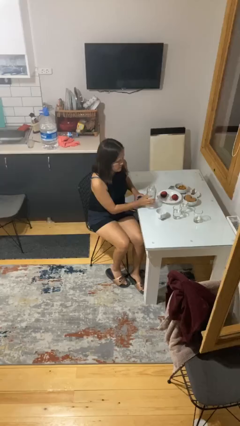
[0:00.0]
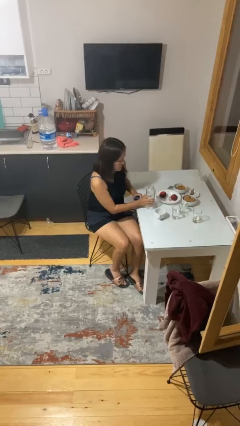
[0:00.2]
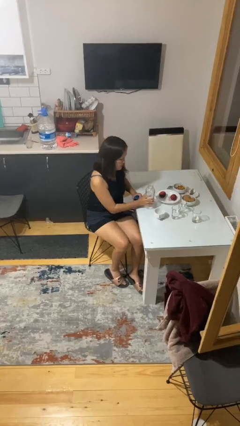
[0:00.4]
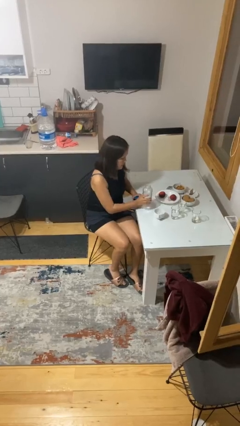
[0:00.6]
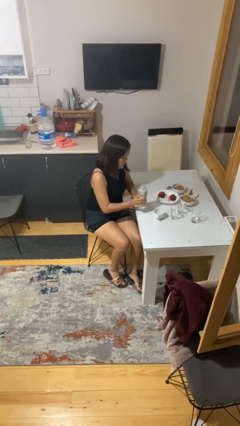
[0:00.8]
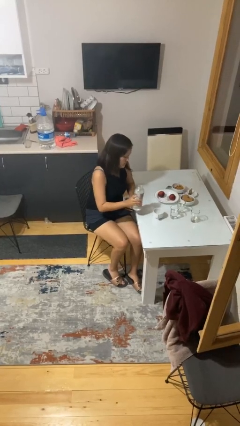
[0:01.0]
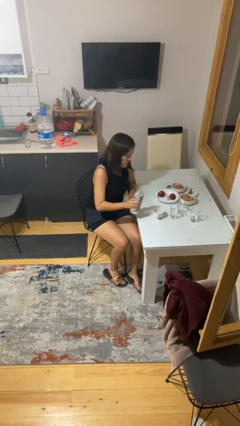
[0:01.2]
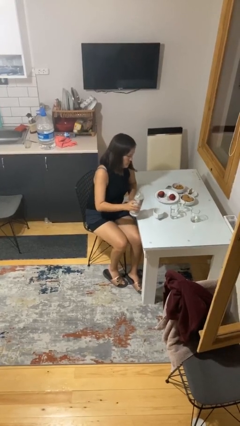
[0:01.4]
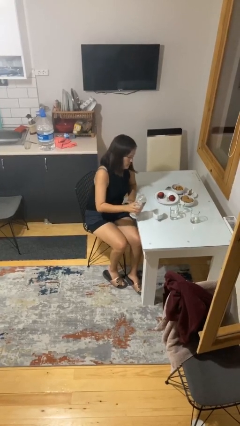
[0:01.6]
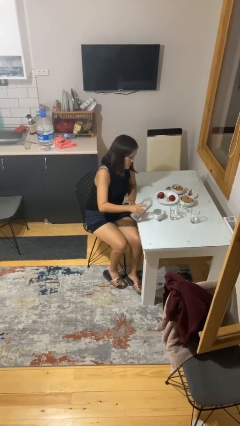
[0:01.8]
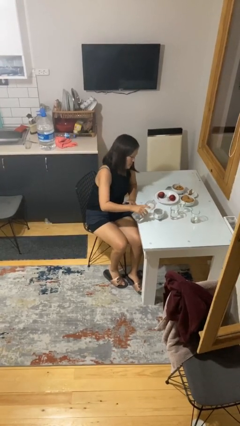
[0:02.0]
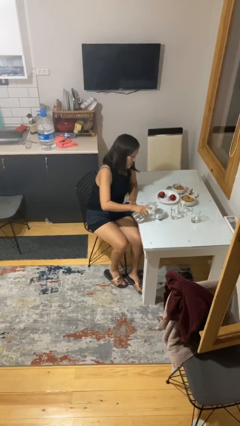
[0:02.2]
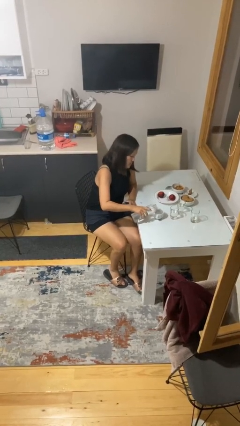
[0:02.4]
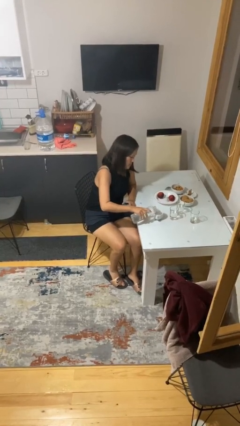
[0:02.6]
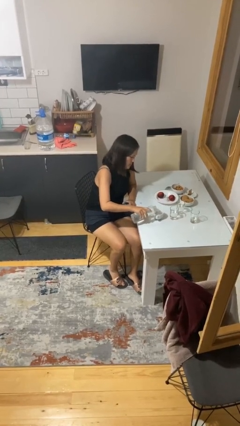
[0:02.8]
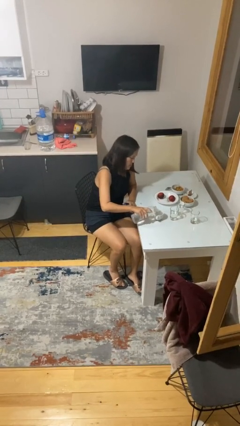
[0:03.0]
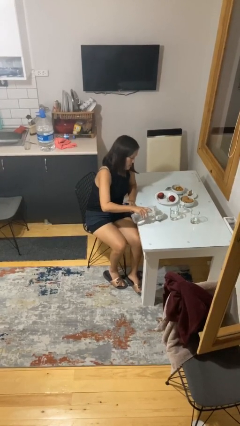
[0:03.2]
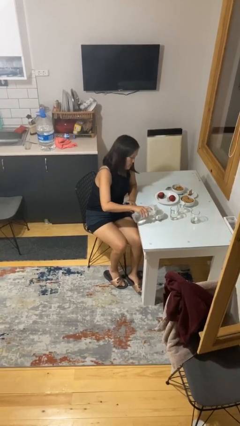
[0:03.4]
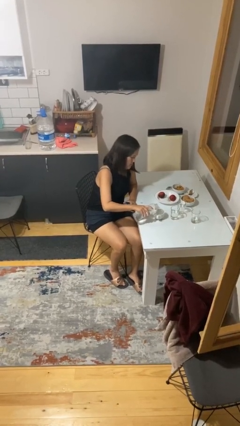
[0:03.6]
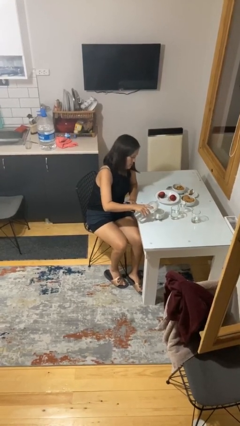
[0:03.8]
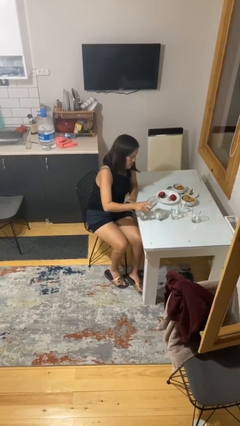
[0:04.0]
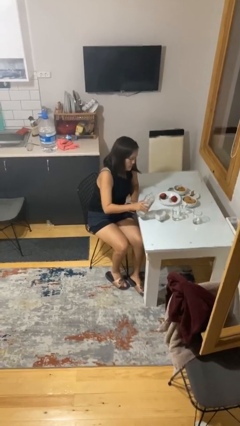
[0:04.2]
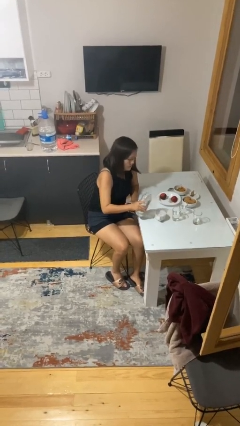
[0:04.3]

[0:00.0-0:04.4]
person pours liquid into cup

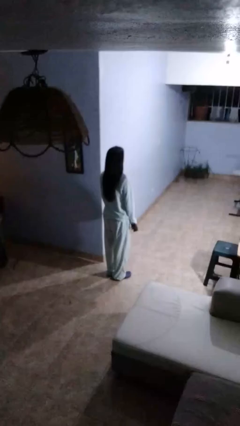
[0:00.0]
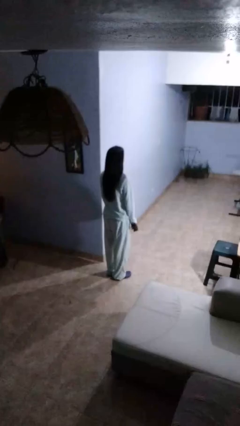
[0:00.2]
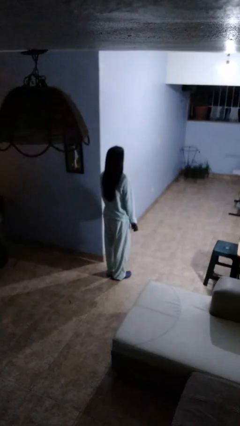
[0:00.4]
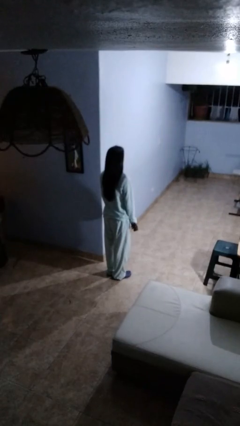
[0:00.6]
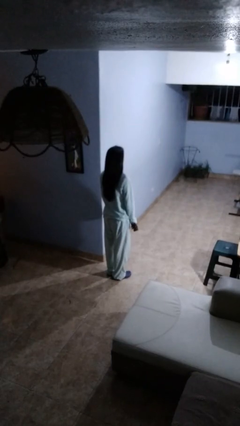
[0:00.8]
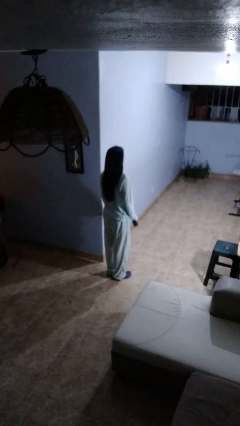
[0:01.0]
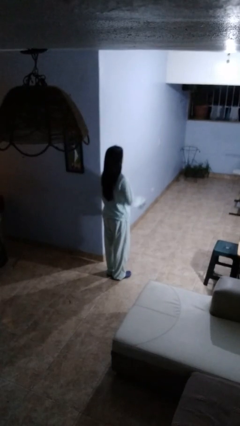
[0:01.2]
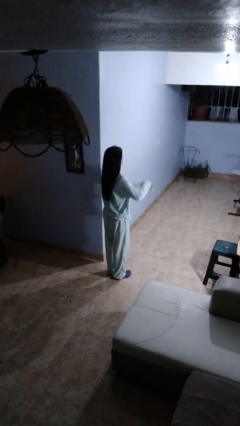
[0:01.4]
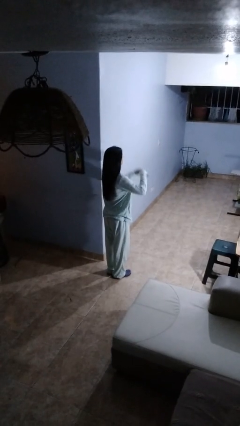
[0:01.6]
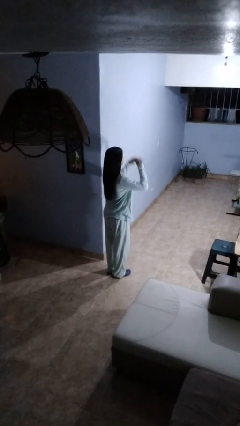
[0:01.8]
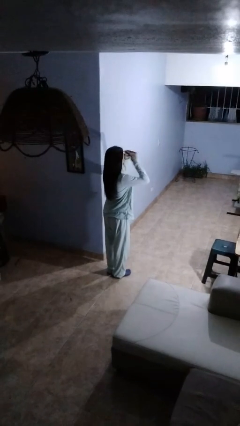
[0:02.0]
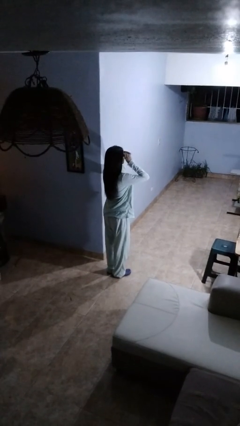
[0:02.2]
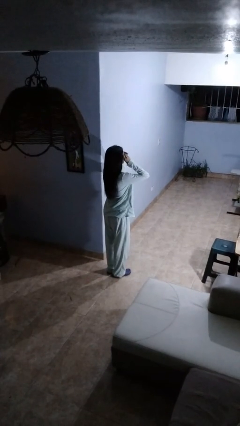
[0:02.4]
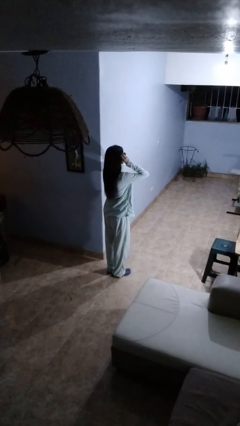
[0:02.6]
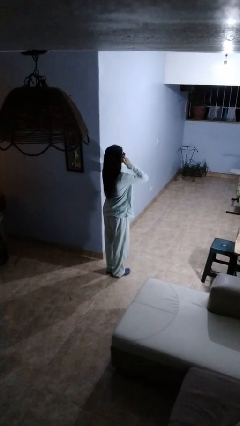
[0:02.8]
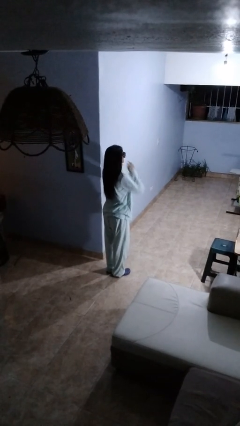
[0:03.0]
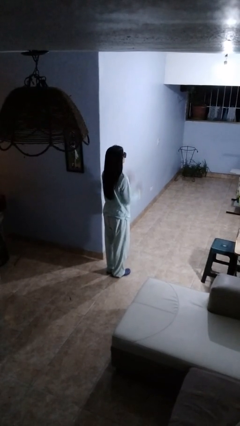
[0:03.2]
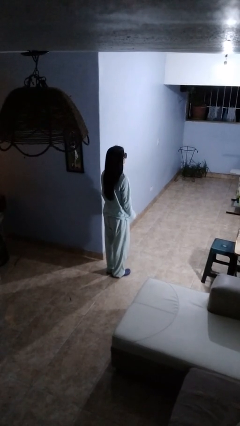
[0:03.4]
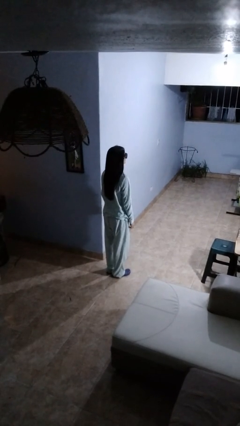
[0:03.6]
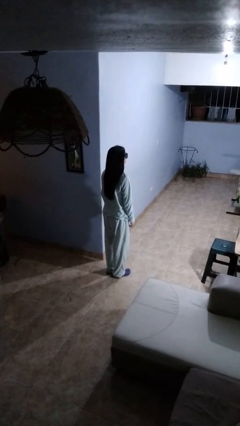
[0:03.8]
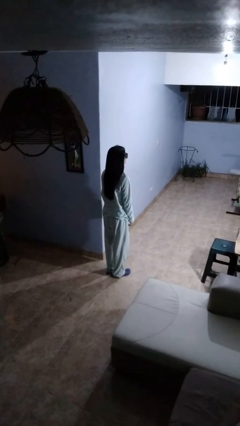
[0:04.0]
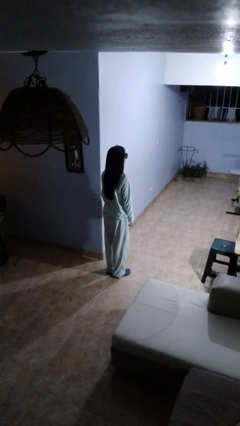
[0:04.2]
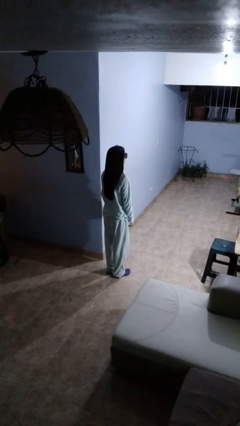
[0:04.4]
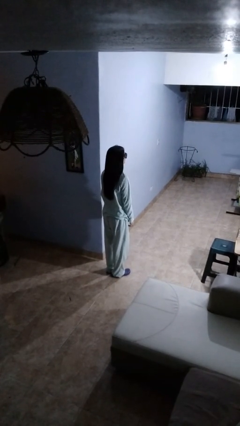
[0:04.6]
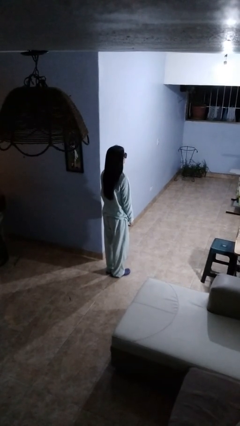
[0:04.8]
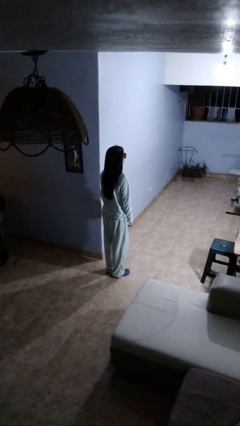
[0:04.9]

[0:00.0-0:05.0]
person puts on sunglasses

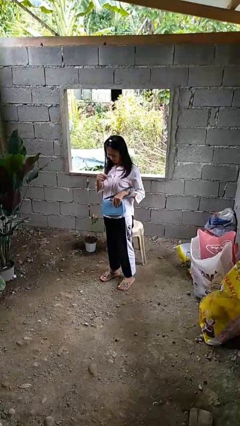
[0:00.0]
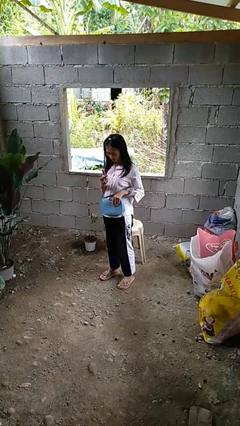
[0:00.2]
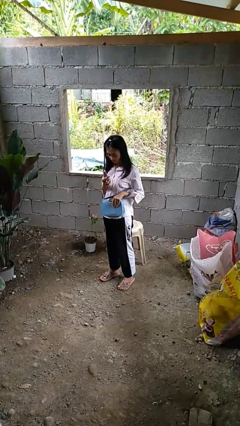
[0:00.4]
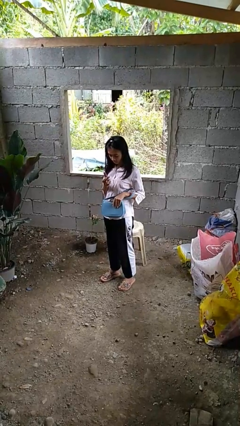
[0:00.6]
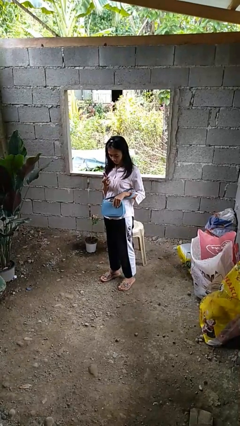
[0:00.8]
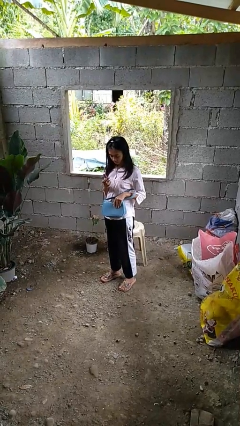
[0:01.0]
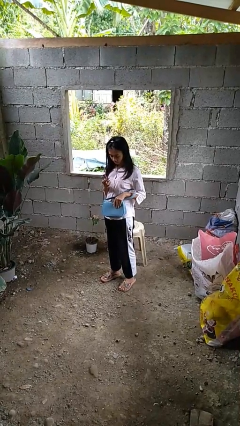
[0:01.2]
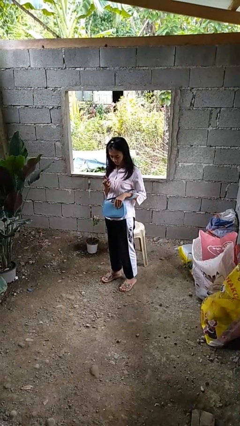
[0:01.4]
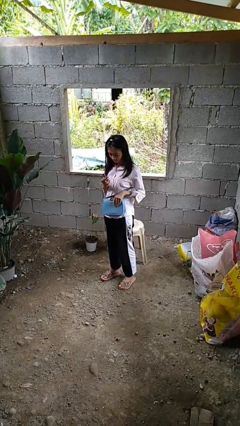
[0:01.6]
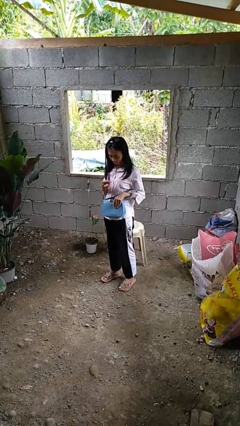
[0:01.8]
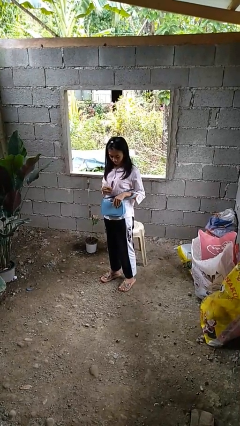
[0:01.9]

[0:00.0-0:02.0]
person takes object from purse

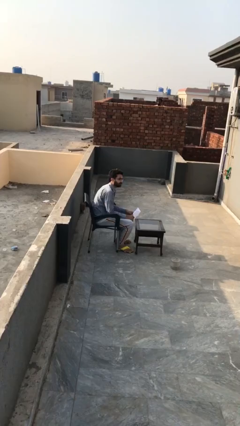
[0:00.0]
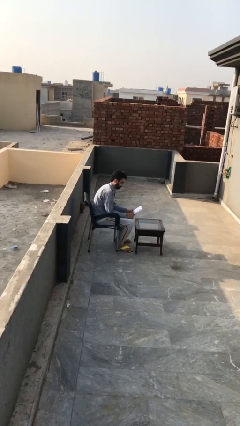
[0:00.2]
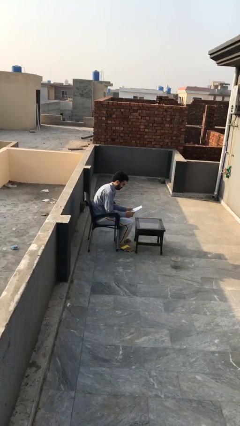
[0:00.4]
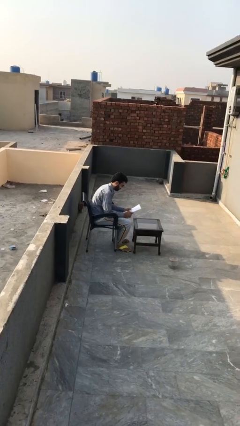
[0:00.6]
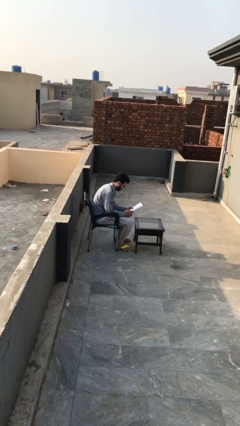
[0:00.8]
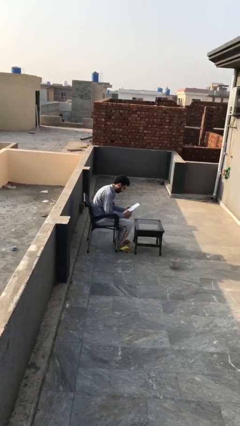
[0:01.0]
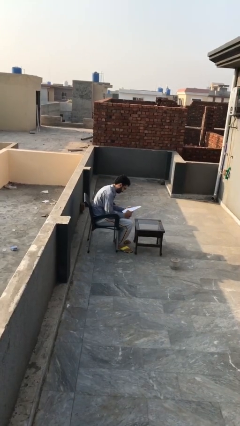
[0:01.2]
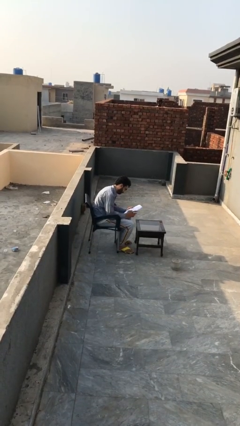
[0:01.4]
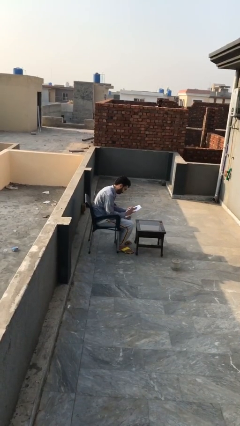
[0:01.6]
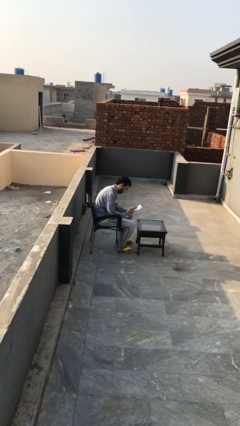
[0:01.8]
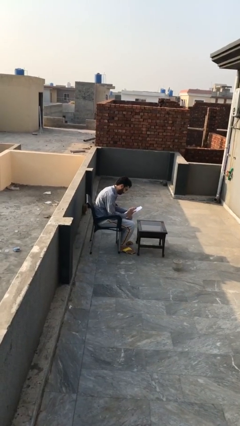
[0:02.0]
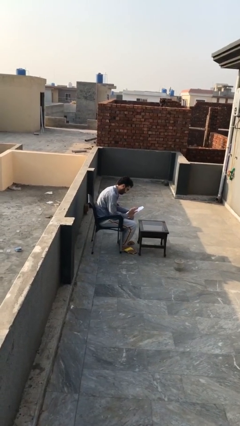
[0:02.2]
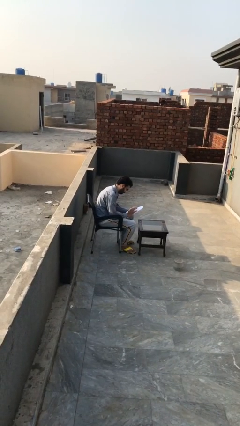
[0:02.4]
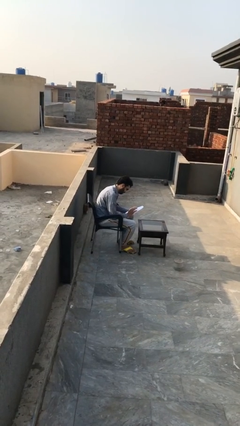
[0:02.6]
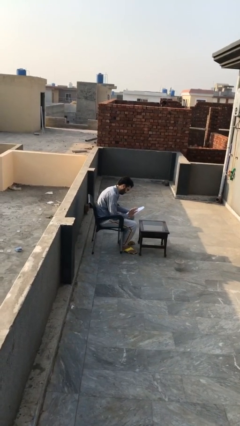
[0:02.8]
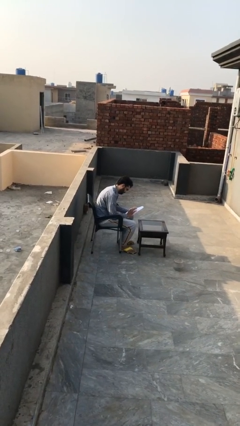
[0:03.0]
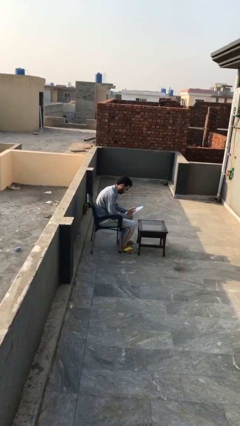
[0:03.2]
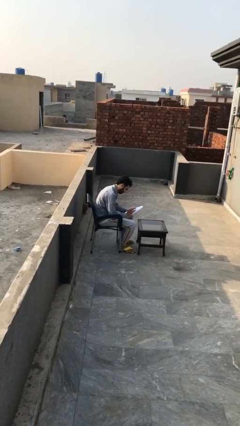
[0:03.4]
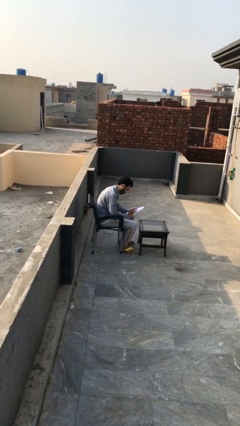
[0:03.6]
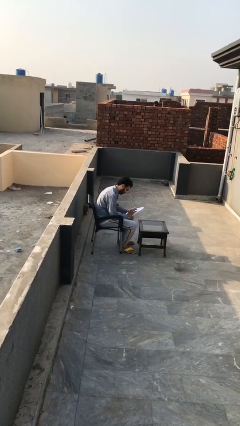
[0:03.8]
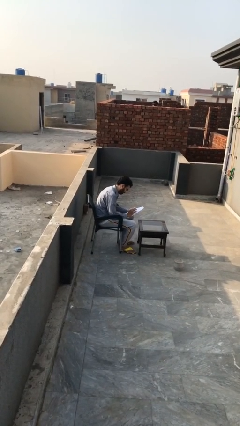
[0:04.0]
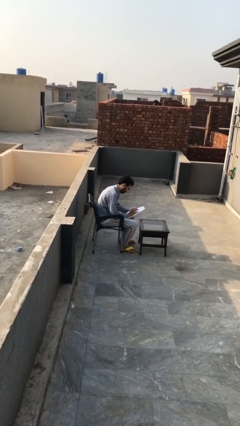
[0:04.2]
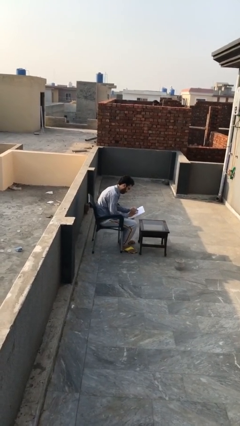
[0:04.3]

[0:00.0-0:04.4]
person reads document

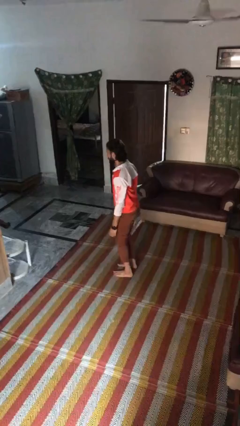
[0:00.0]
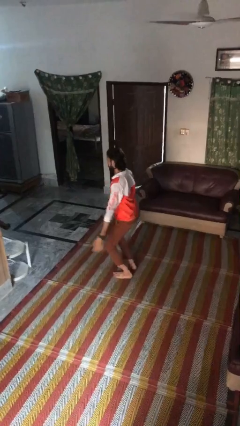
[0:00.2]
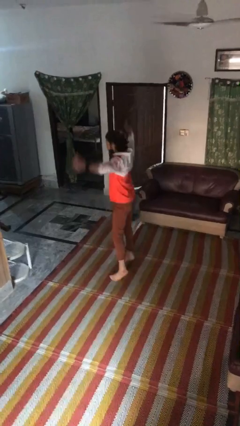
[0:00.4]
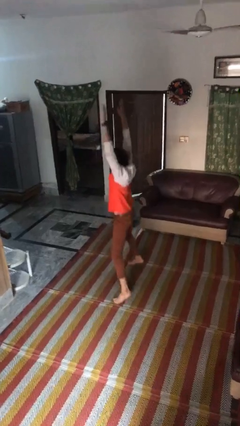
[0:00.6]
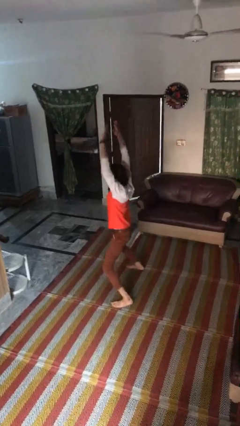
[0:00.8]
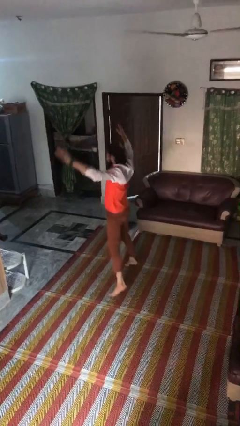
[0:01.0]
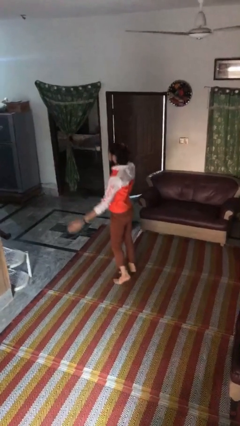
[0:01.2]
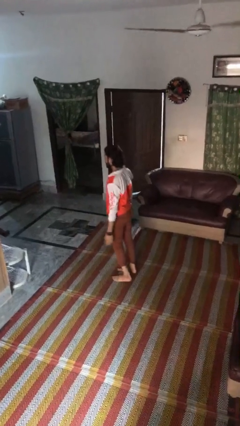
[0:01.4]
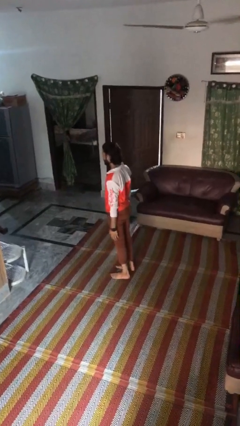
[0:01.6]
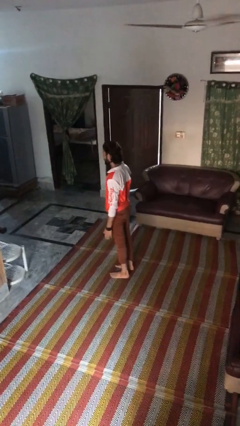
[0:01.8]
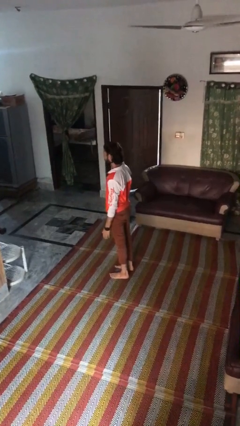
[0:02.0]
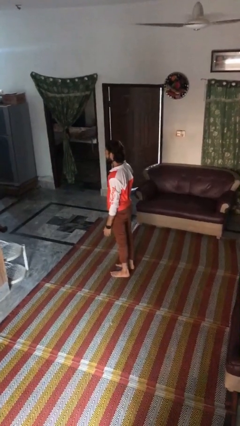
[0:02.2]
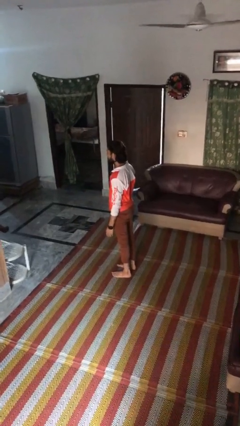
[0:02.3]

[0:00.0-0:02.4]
person exercises with jumping jacks
